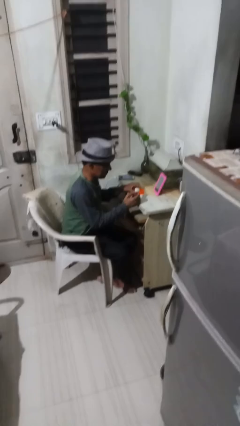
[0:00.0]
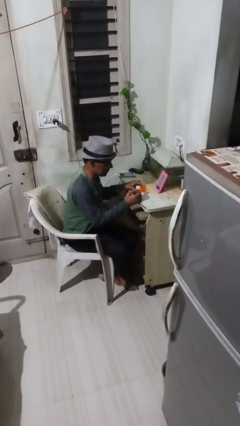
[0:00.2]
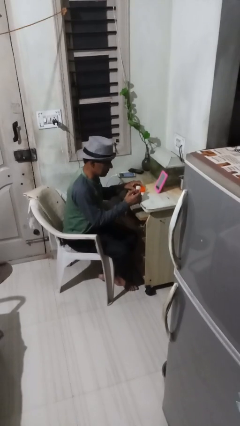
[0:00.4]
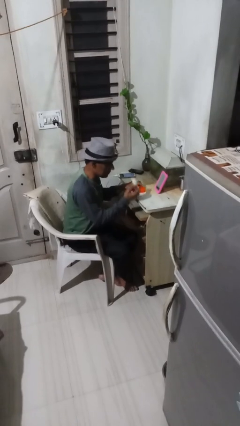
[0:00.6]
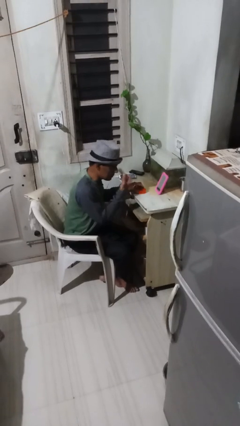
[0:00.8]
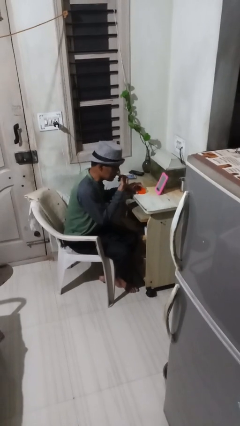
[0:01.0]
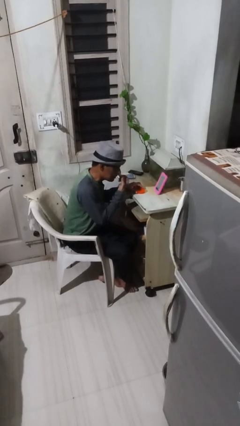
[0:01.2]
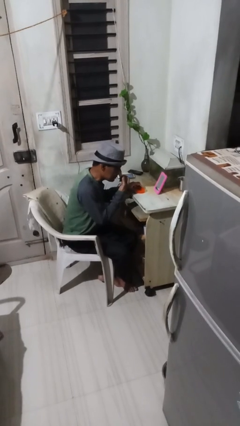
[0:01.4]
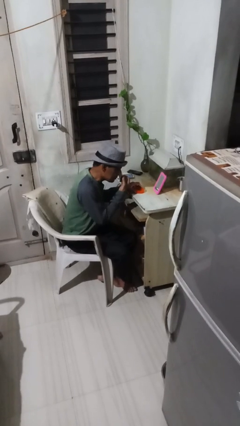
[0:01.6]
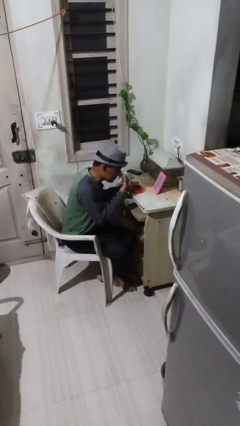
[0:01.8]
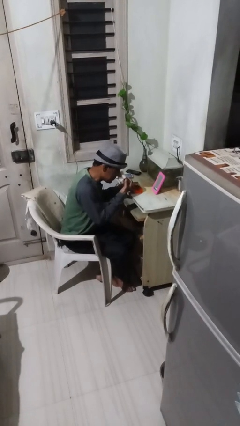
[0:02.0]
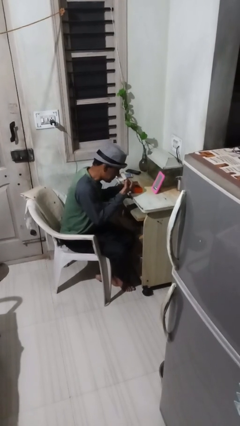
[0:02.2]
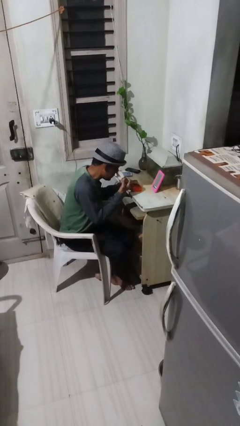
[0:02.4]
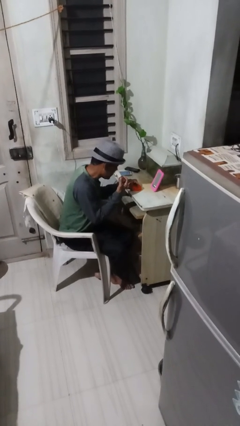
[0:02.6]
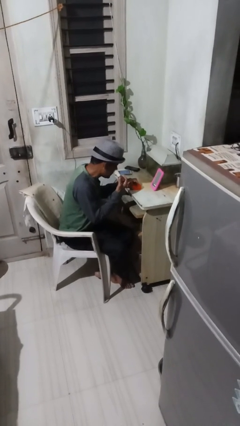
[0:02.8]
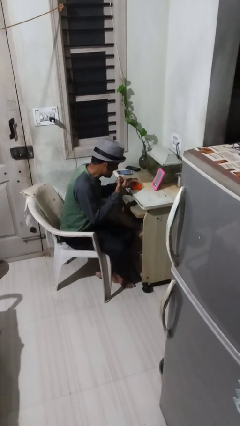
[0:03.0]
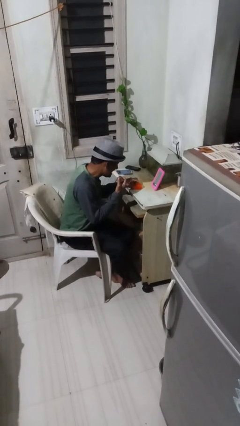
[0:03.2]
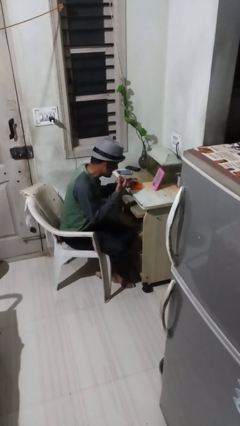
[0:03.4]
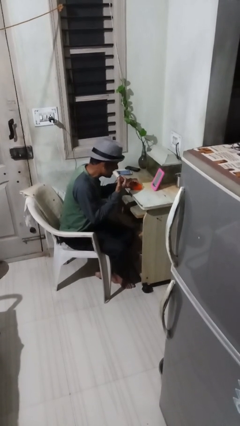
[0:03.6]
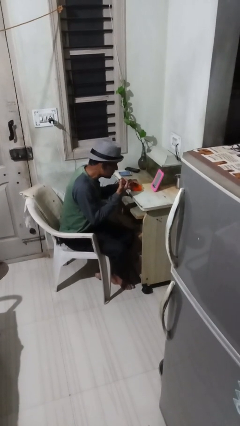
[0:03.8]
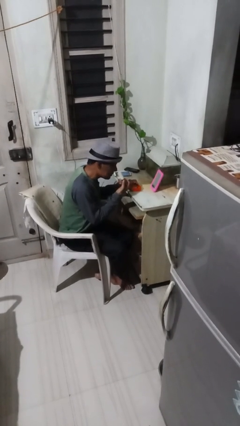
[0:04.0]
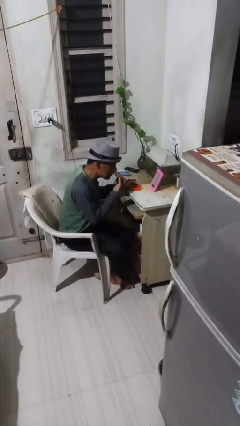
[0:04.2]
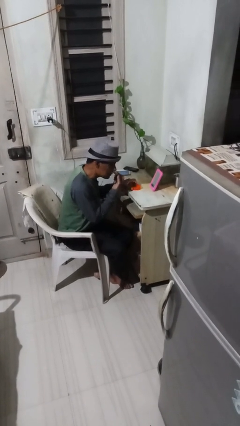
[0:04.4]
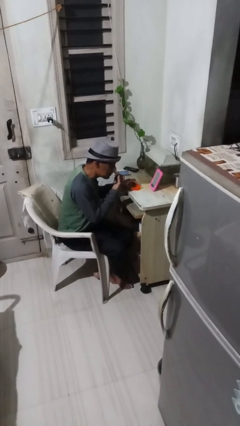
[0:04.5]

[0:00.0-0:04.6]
person applies foundation makeup

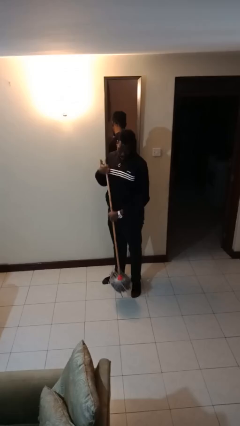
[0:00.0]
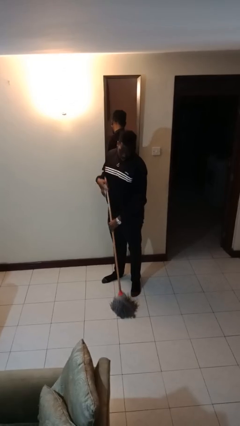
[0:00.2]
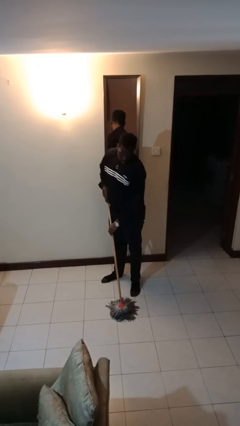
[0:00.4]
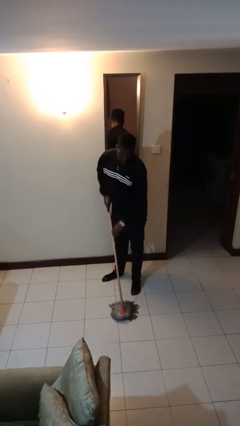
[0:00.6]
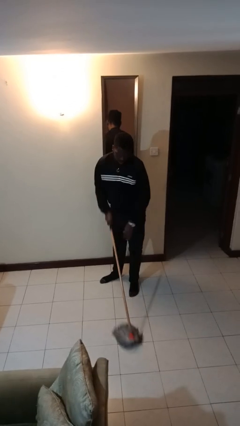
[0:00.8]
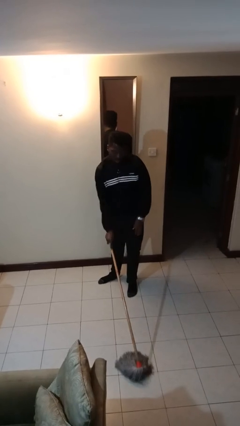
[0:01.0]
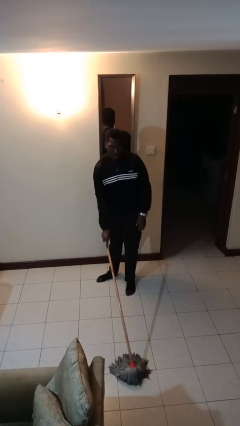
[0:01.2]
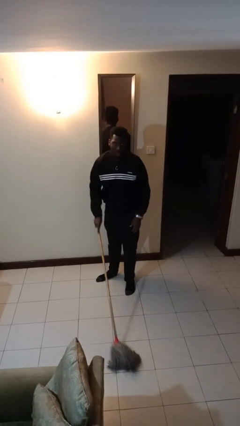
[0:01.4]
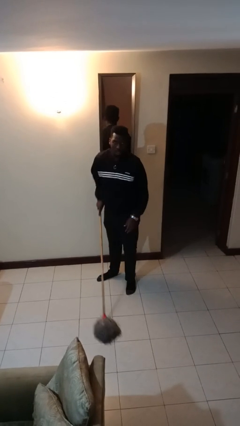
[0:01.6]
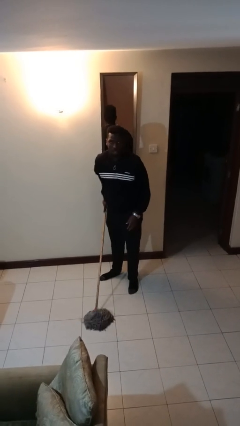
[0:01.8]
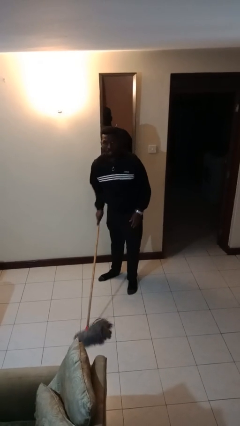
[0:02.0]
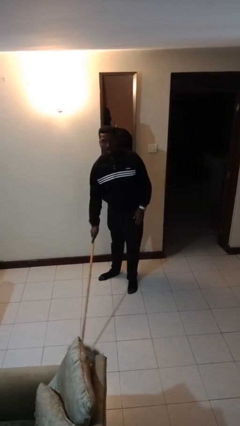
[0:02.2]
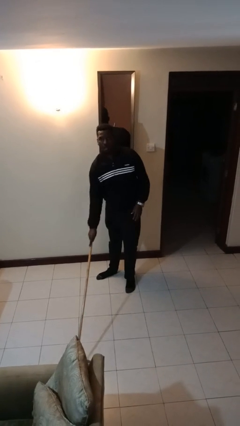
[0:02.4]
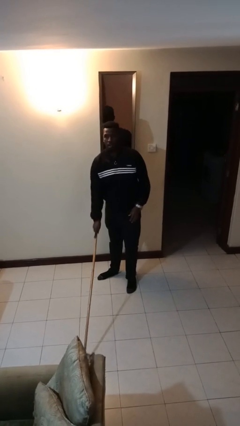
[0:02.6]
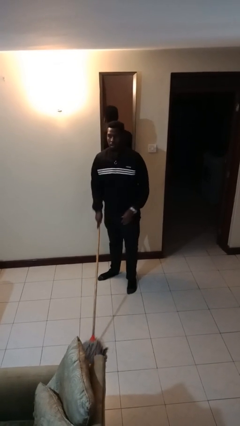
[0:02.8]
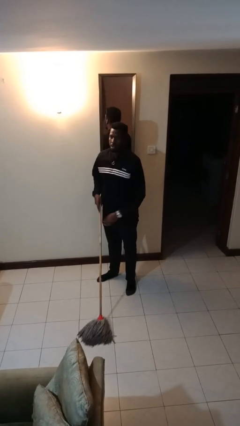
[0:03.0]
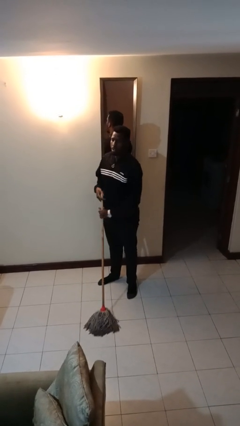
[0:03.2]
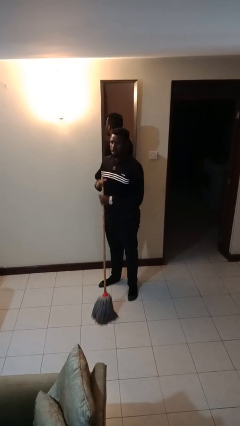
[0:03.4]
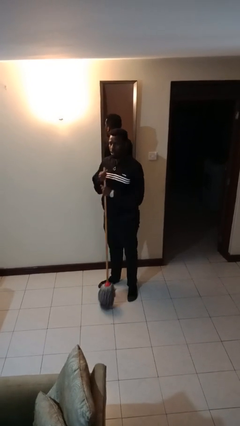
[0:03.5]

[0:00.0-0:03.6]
person mops

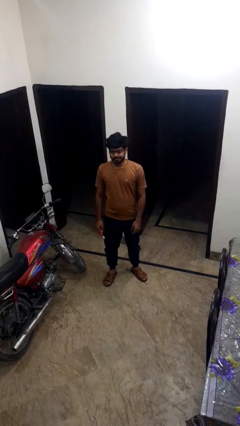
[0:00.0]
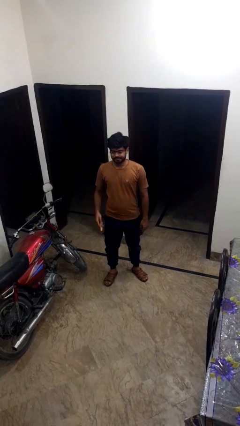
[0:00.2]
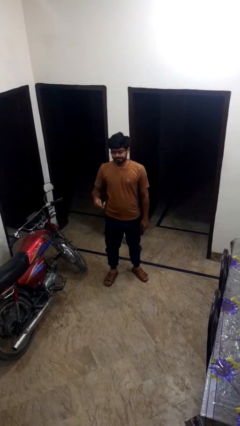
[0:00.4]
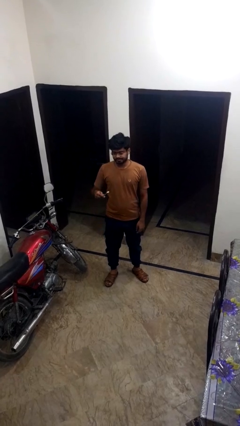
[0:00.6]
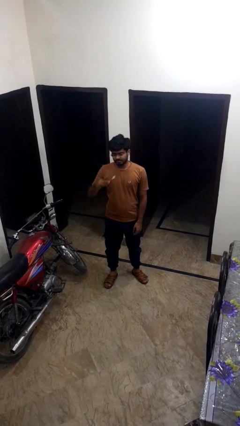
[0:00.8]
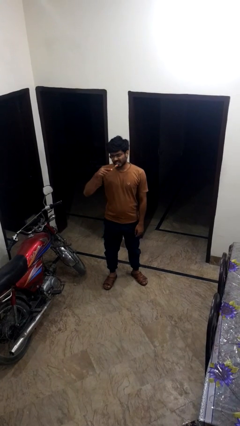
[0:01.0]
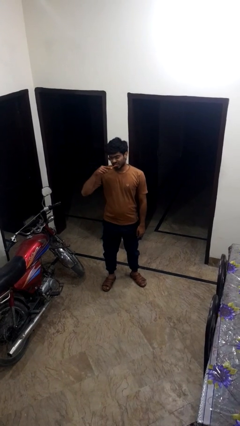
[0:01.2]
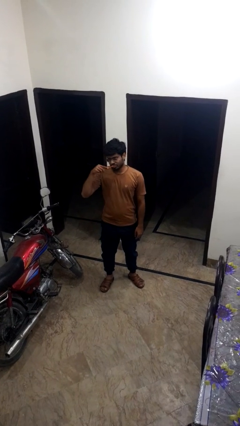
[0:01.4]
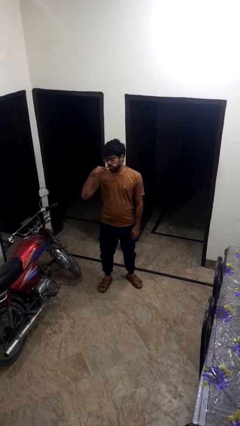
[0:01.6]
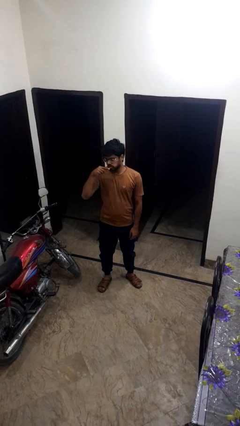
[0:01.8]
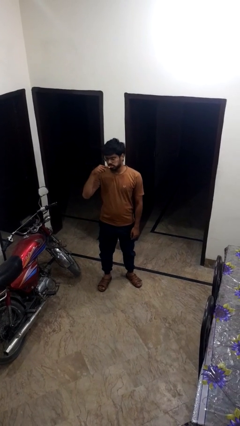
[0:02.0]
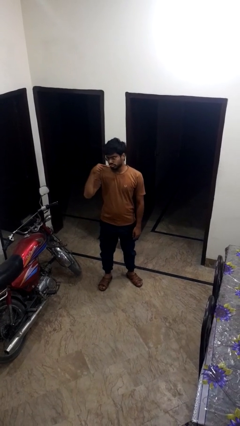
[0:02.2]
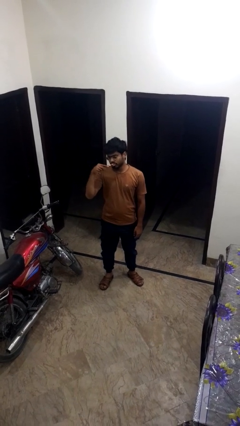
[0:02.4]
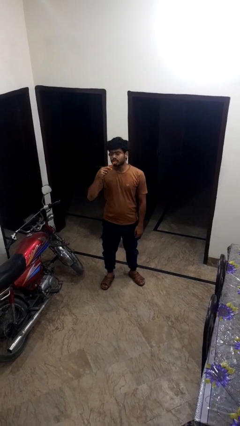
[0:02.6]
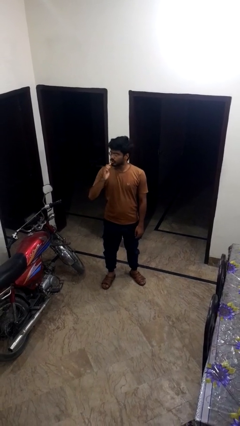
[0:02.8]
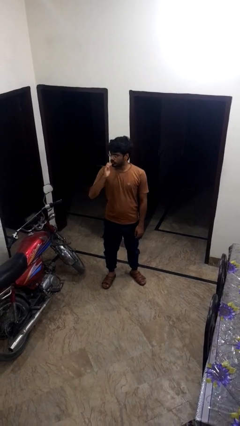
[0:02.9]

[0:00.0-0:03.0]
person brushes teeth

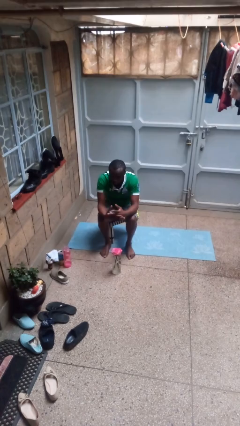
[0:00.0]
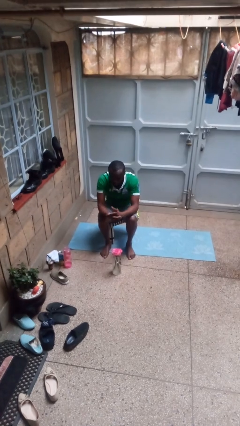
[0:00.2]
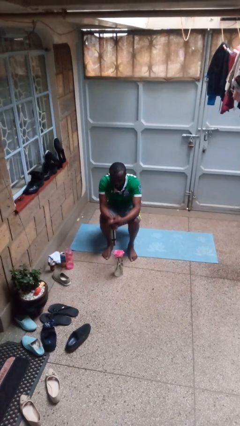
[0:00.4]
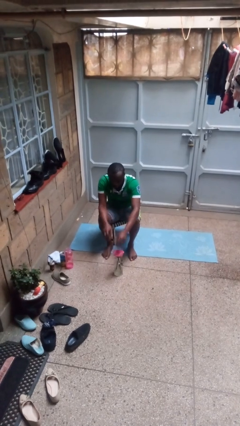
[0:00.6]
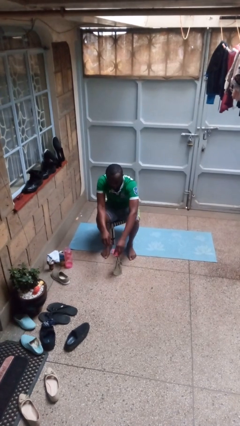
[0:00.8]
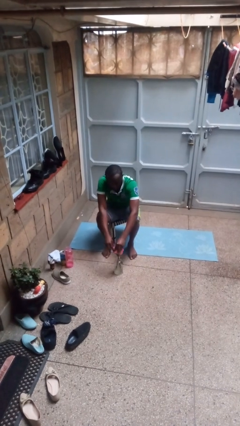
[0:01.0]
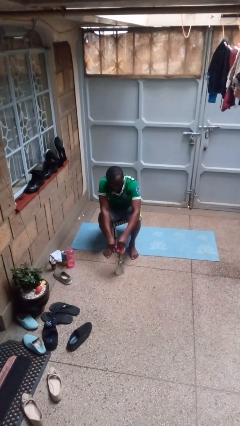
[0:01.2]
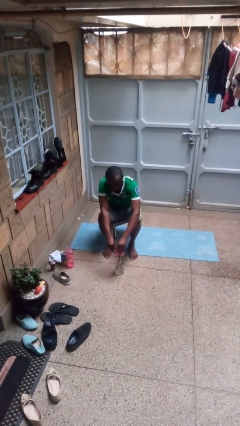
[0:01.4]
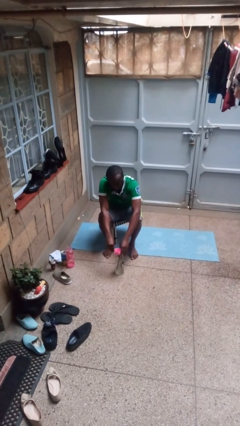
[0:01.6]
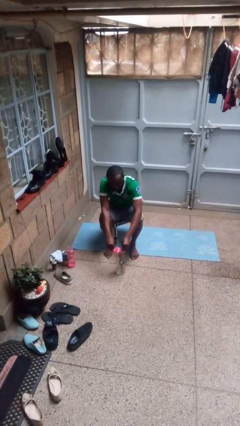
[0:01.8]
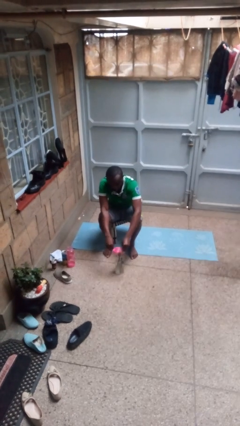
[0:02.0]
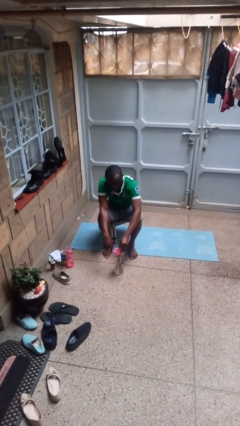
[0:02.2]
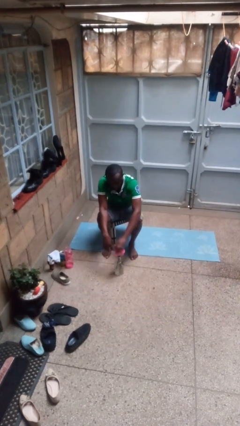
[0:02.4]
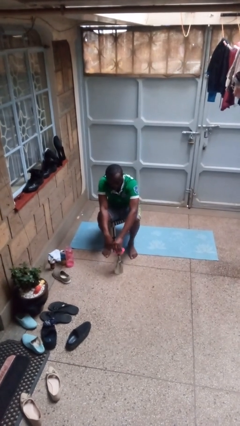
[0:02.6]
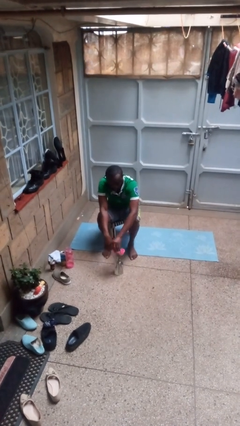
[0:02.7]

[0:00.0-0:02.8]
person arranges flowers in vase

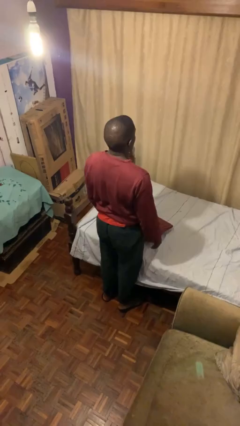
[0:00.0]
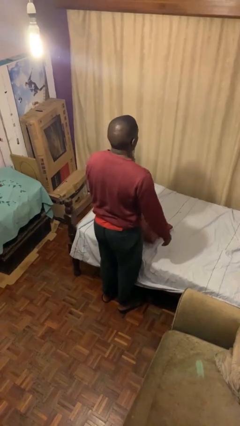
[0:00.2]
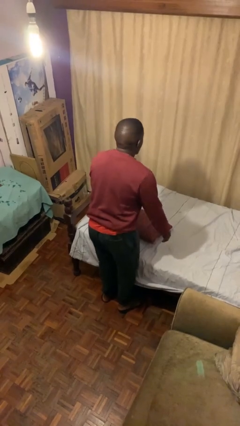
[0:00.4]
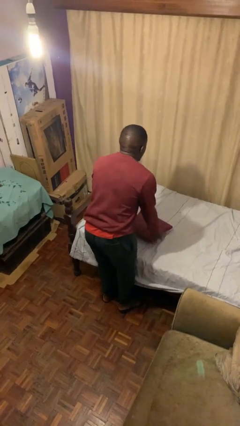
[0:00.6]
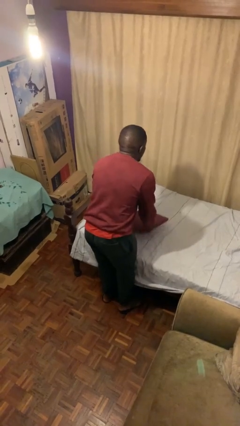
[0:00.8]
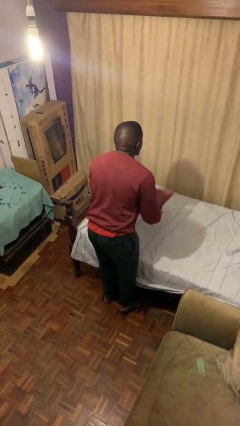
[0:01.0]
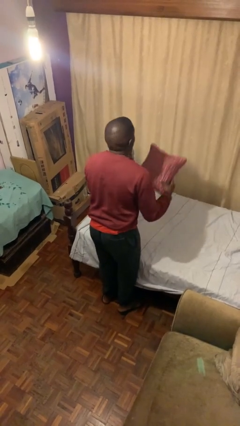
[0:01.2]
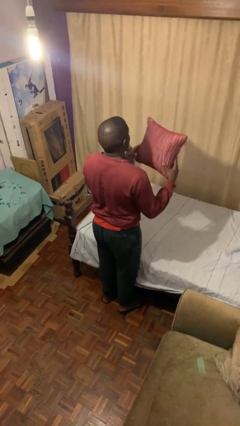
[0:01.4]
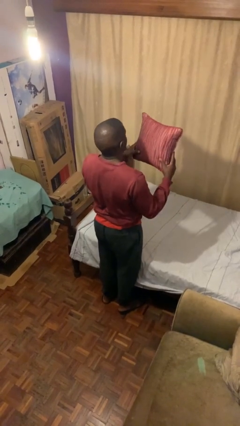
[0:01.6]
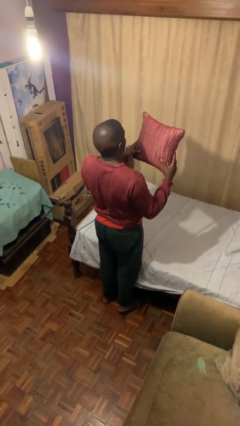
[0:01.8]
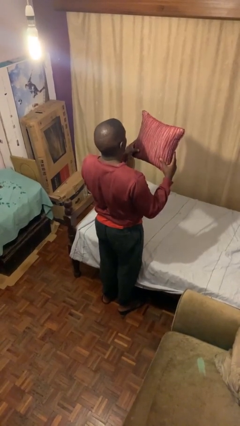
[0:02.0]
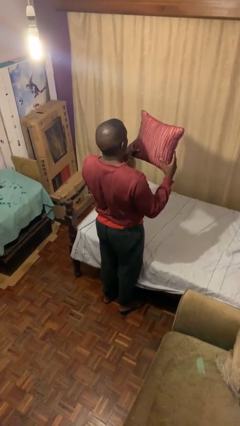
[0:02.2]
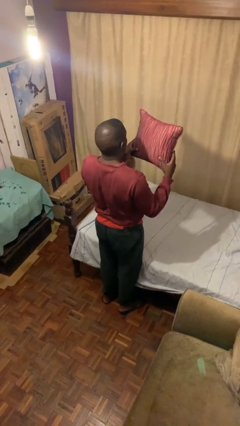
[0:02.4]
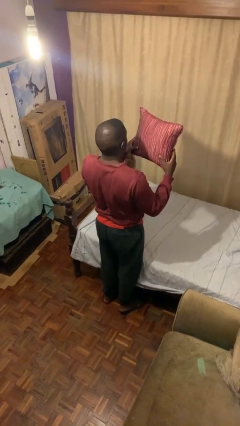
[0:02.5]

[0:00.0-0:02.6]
person picks up object from bed

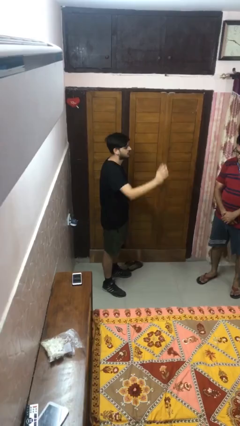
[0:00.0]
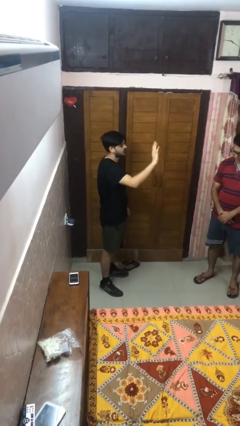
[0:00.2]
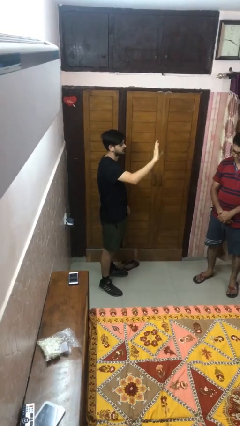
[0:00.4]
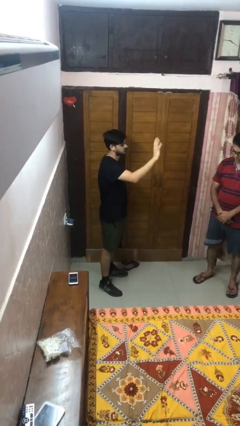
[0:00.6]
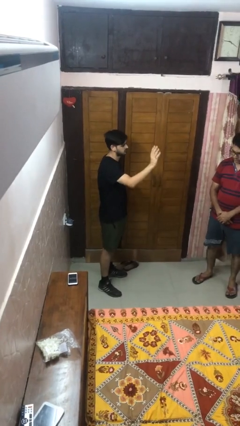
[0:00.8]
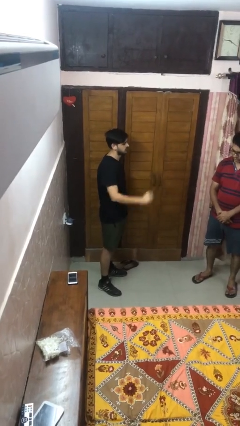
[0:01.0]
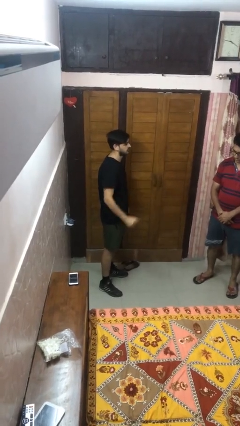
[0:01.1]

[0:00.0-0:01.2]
person waves at person
